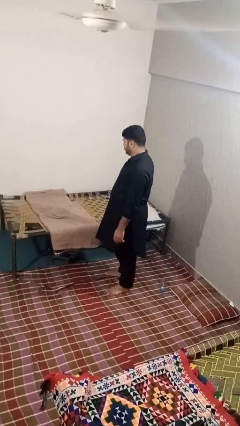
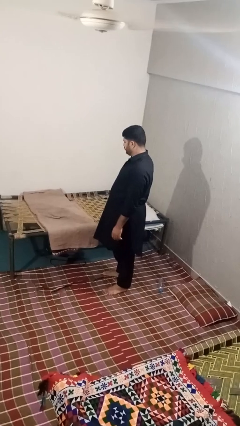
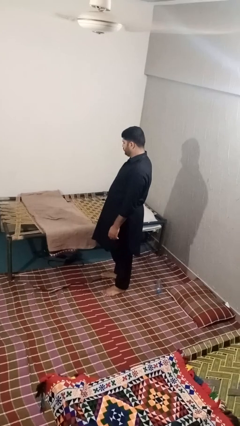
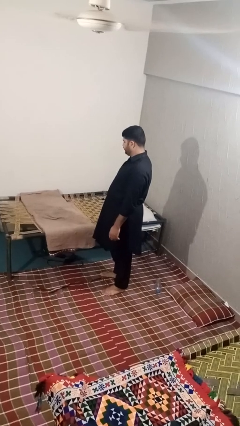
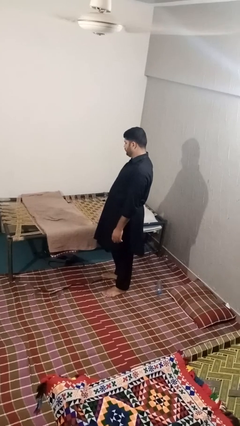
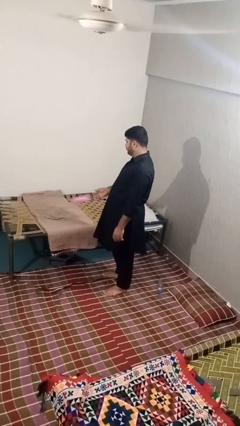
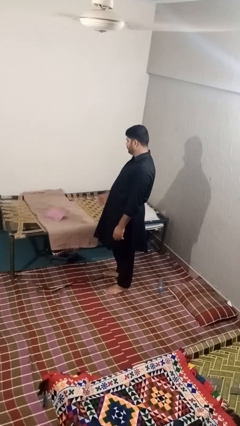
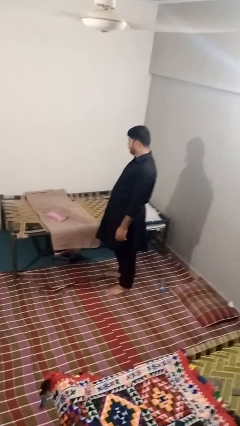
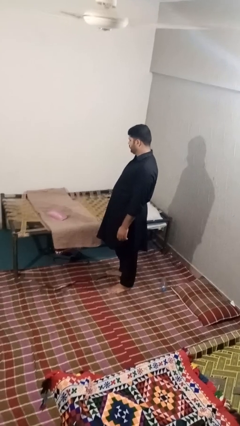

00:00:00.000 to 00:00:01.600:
person puts down object on bed

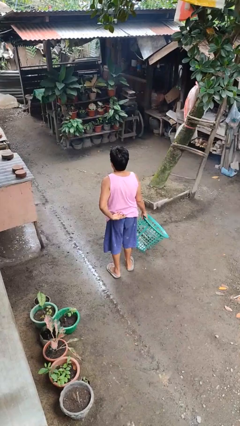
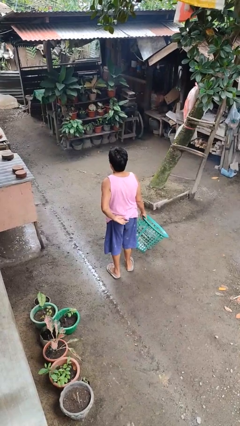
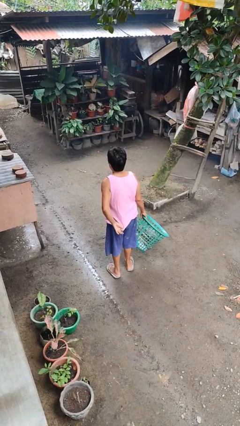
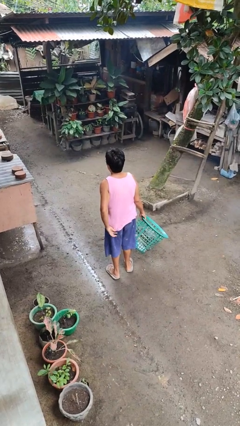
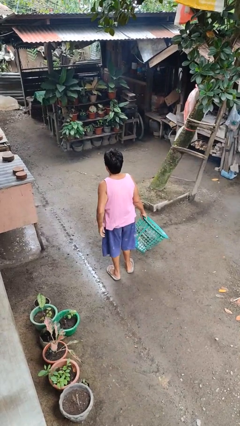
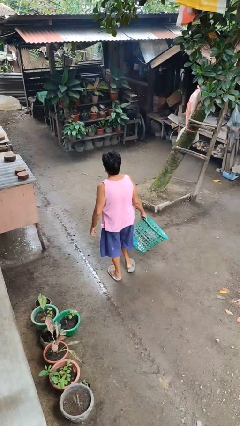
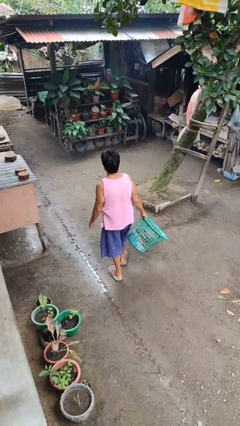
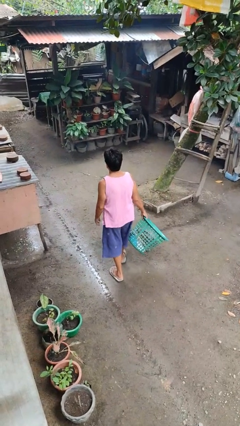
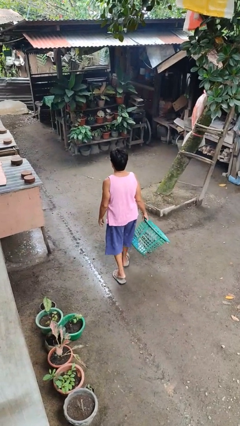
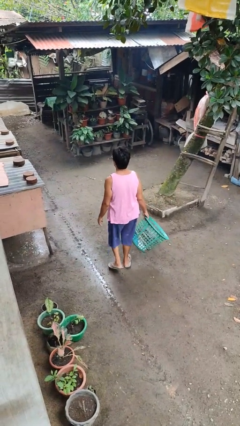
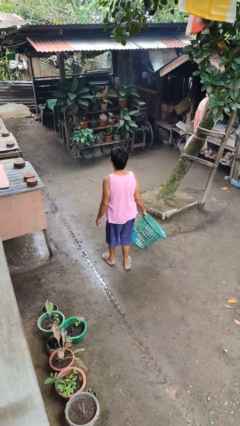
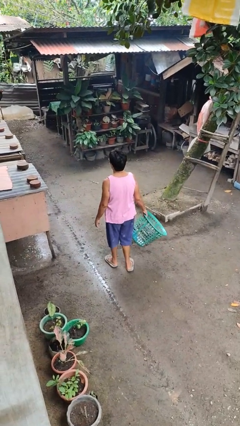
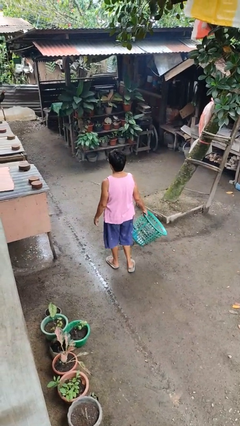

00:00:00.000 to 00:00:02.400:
person carries laundry basket

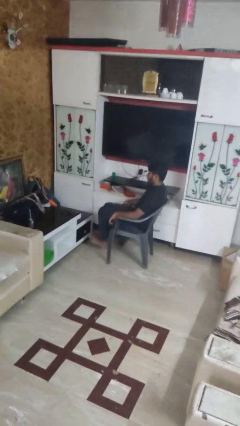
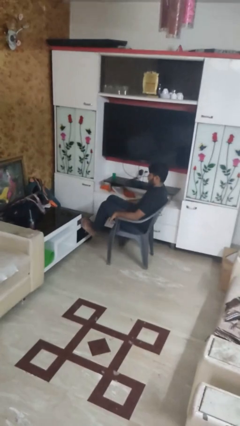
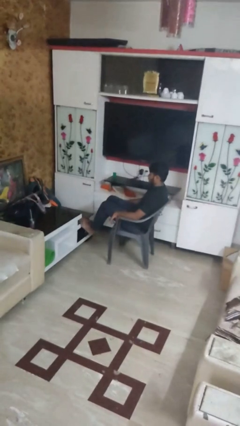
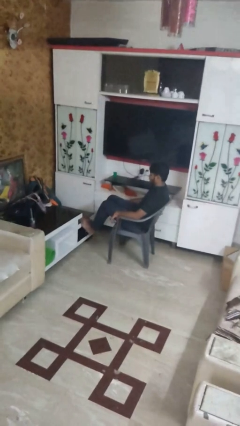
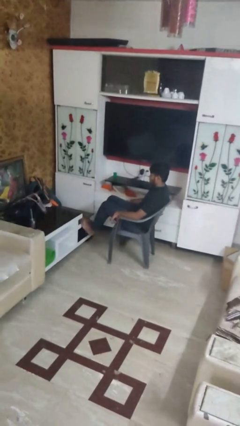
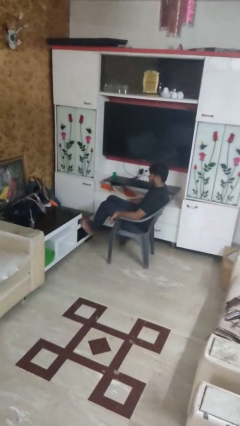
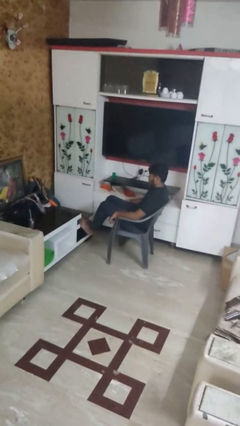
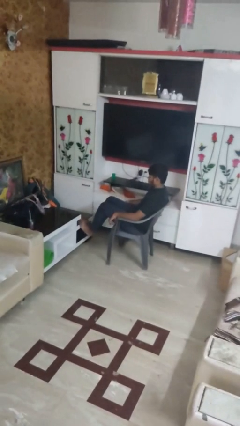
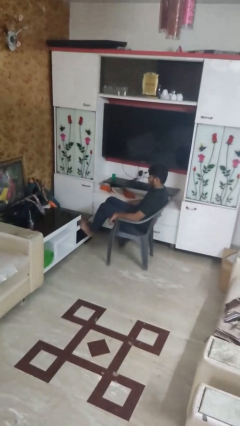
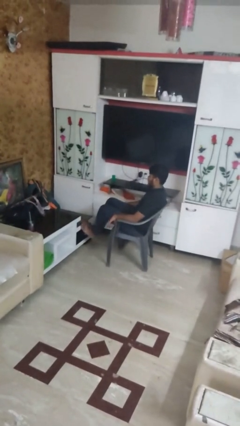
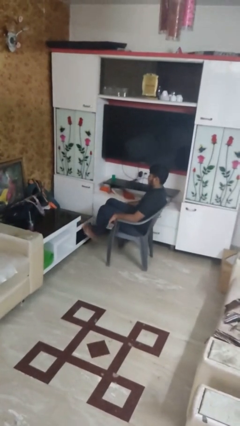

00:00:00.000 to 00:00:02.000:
person puts feet up

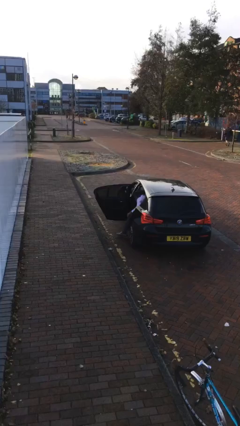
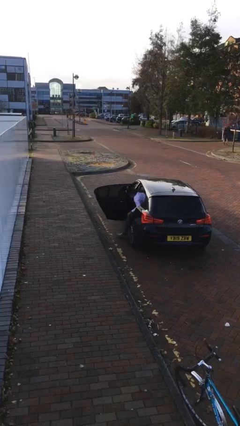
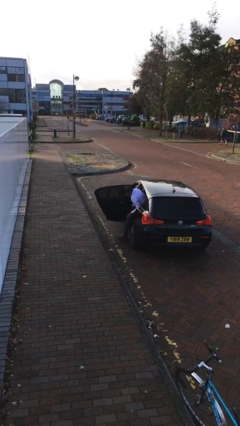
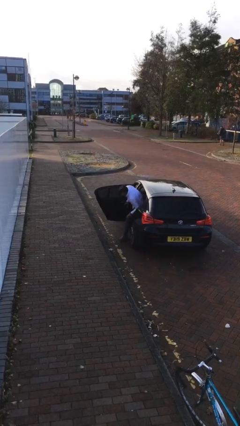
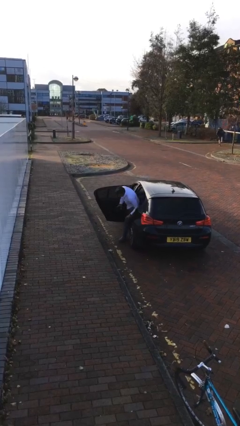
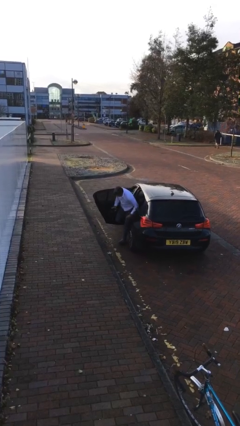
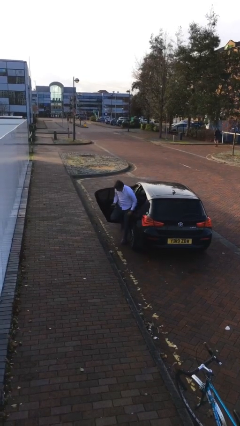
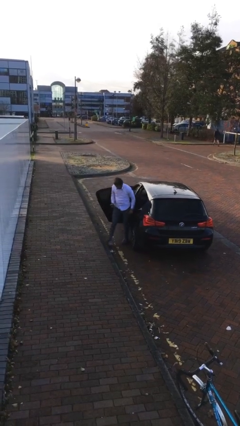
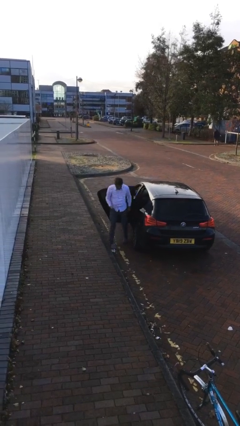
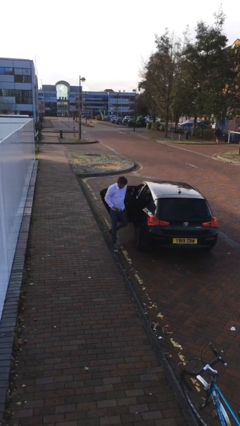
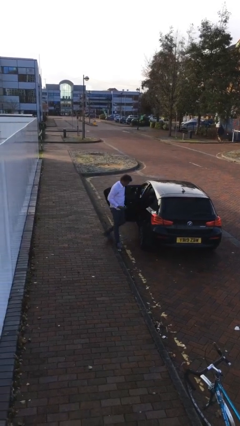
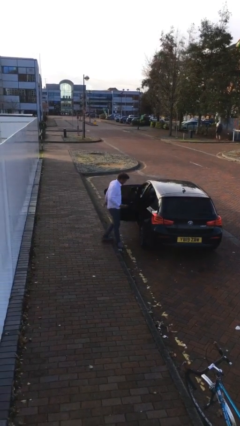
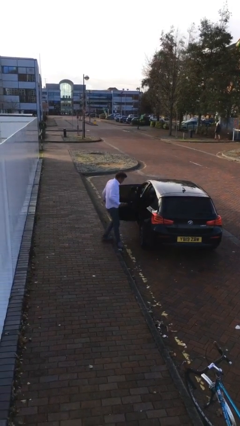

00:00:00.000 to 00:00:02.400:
person exits car

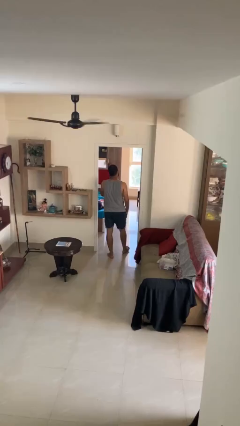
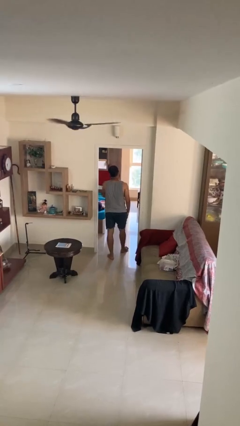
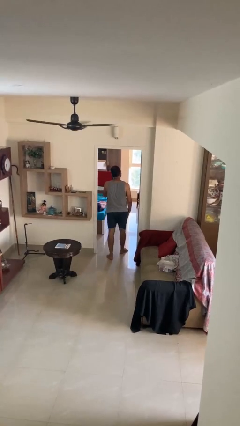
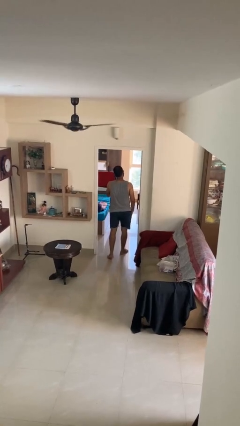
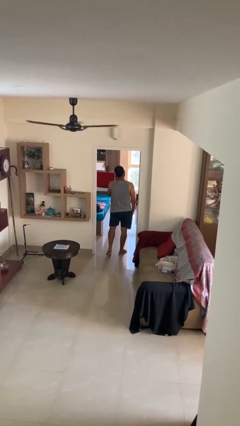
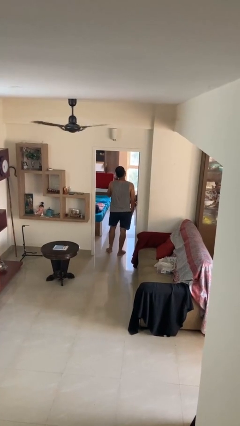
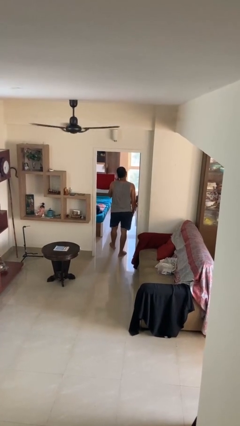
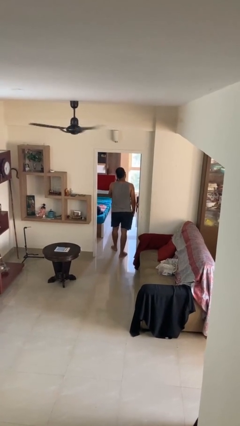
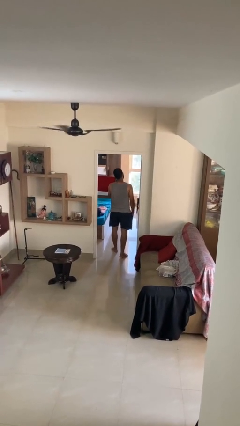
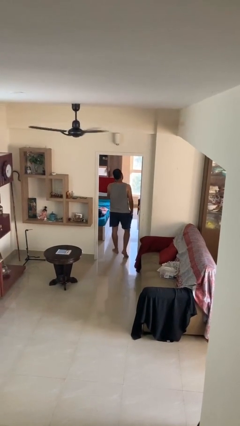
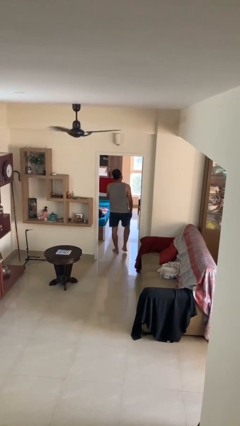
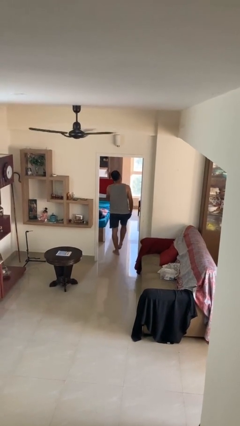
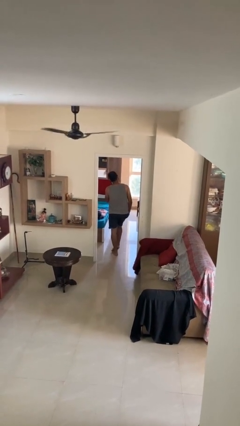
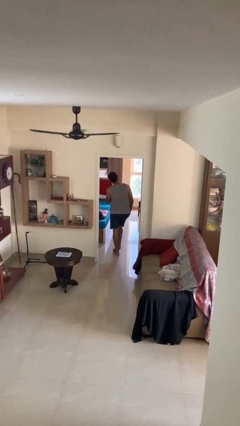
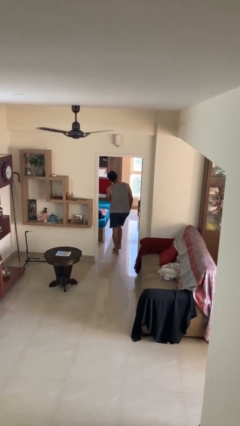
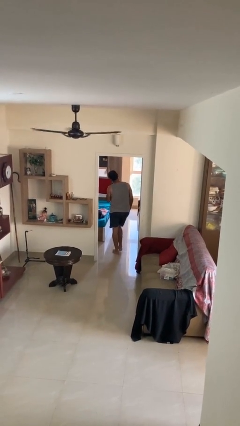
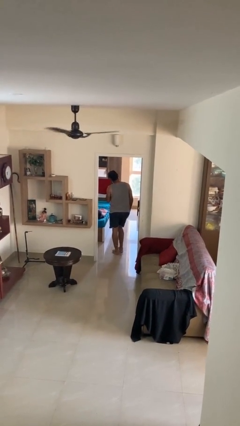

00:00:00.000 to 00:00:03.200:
person exits scene through structure

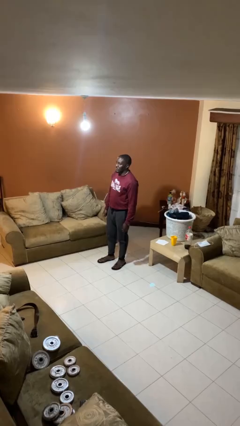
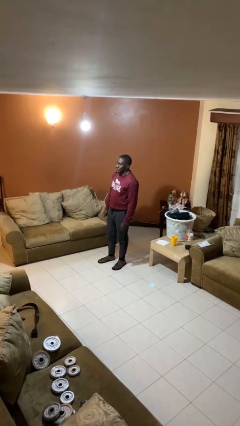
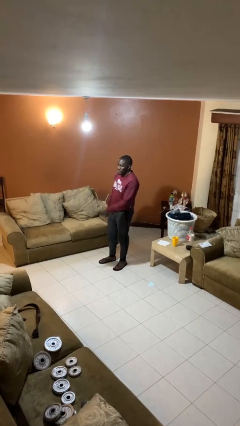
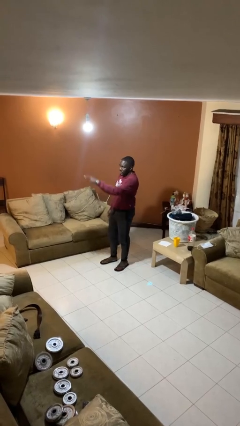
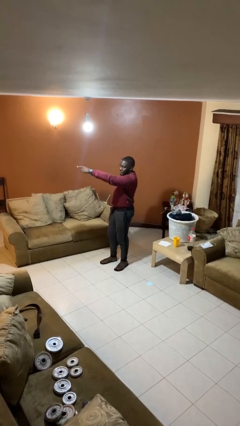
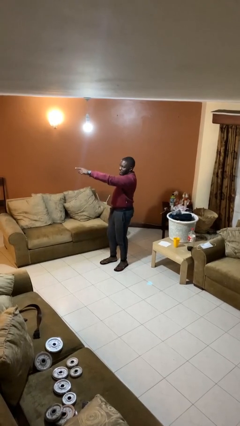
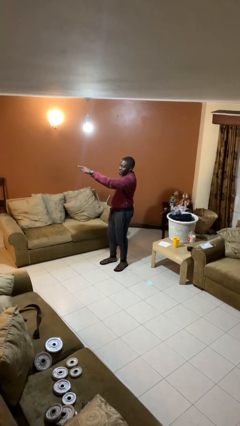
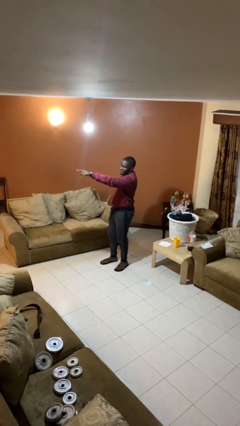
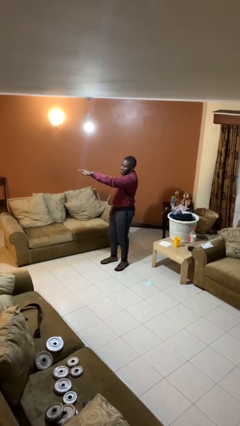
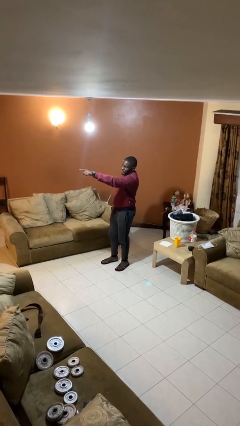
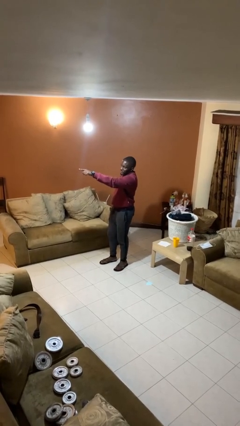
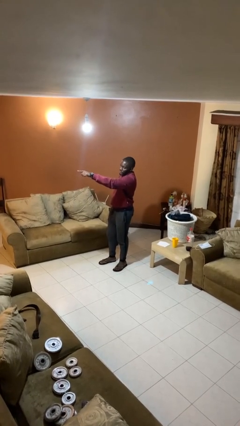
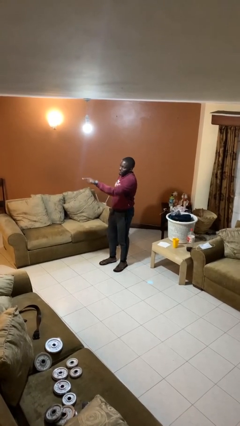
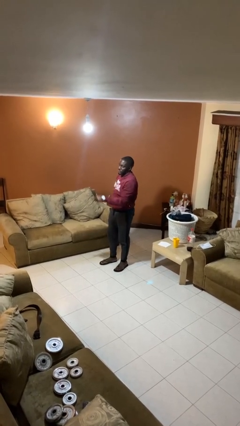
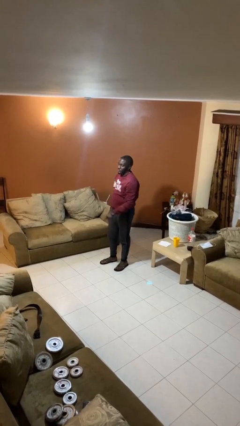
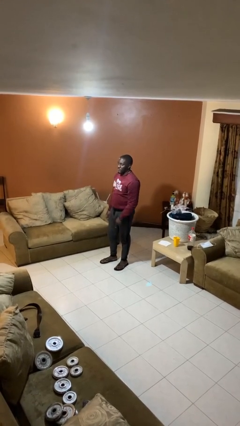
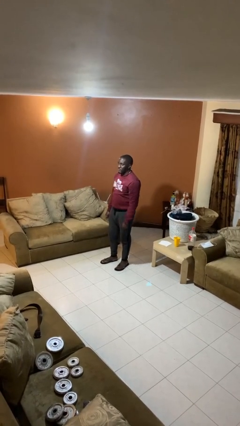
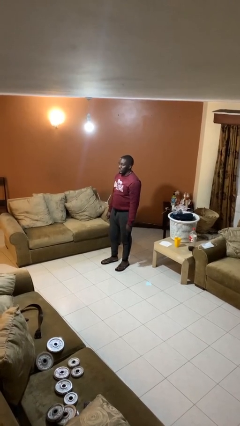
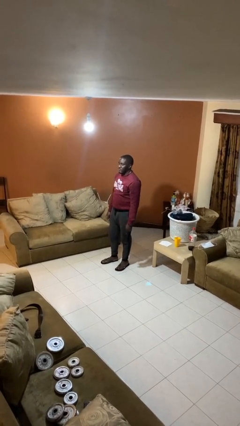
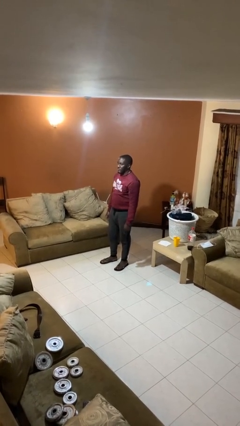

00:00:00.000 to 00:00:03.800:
person points at person

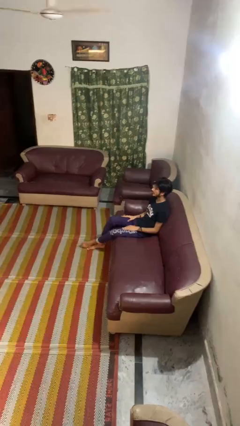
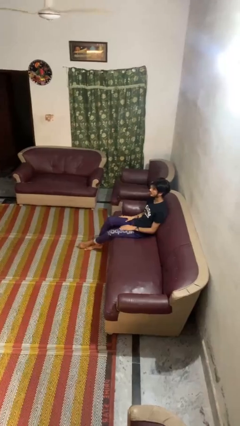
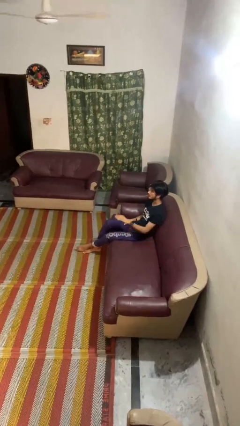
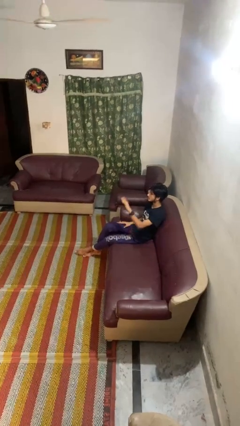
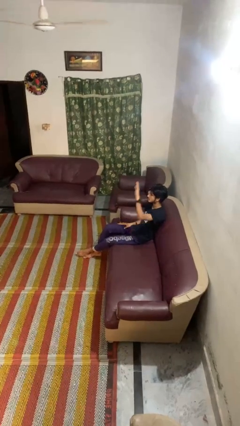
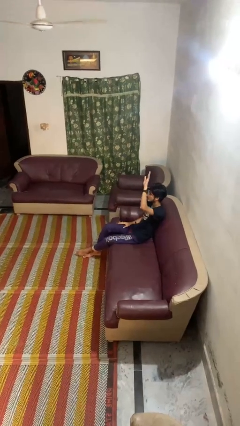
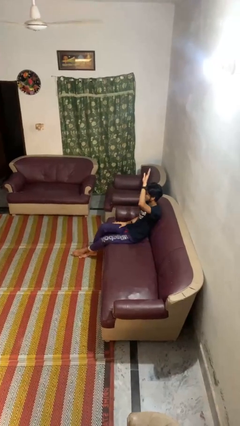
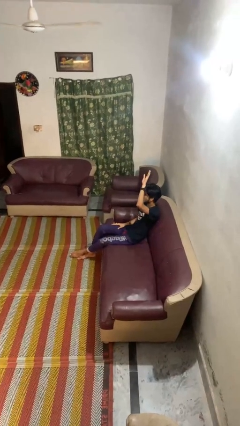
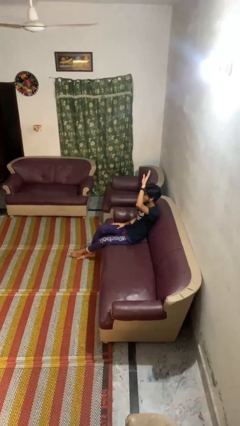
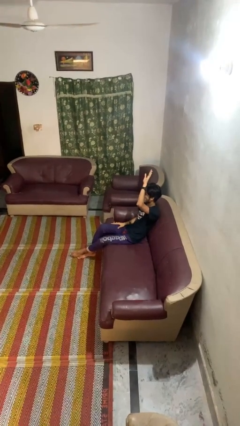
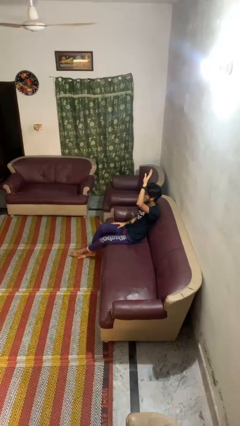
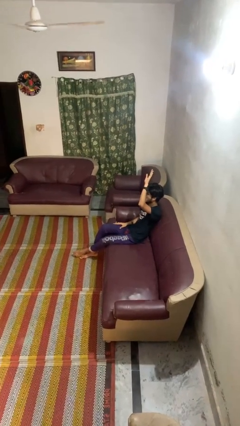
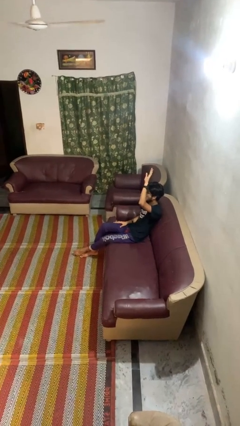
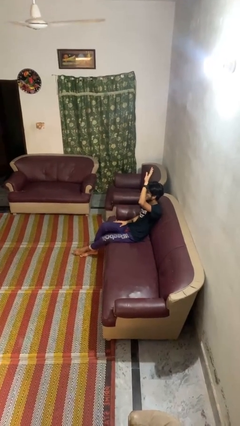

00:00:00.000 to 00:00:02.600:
person gestures raise hand
